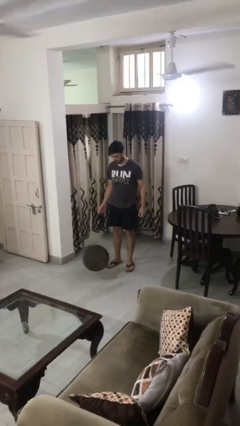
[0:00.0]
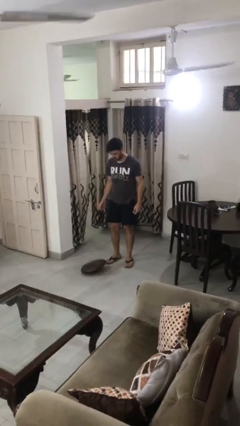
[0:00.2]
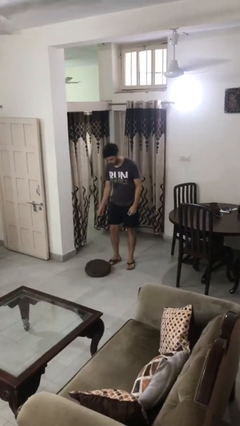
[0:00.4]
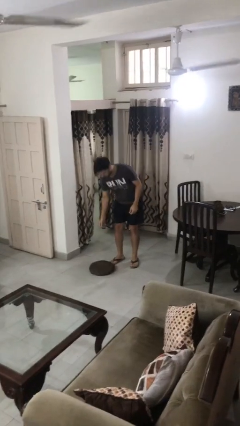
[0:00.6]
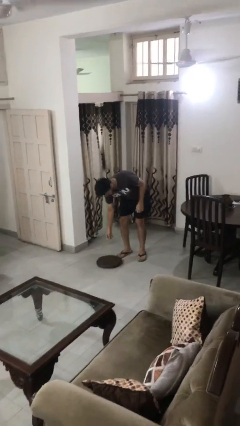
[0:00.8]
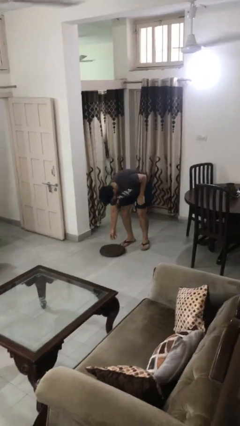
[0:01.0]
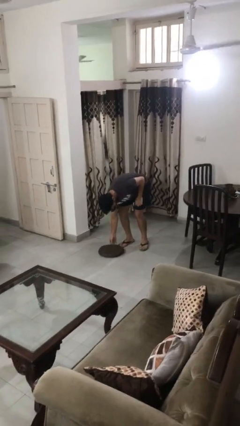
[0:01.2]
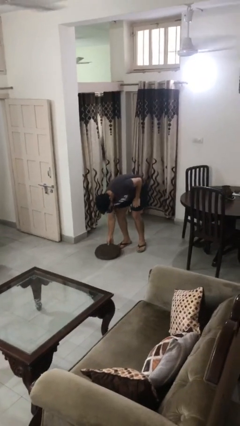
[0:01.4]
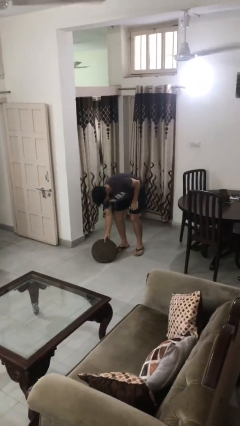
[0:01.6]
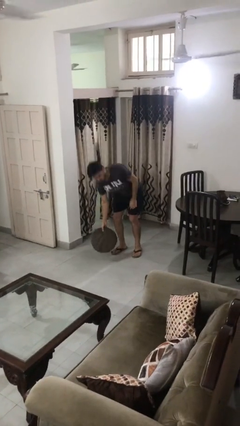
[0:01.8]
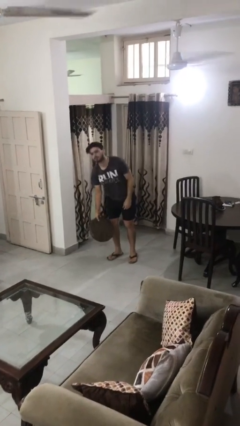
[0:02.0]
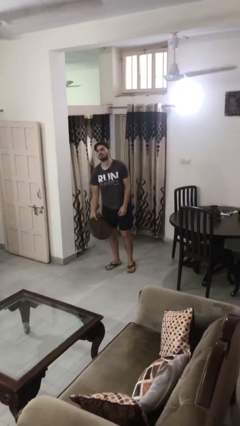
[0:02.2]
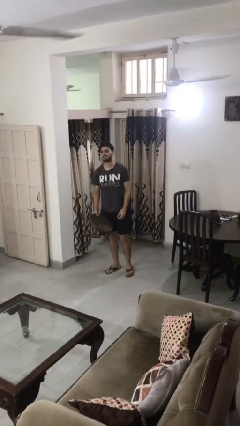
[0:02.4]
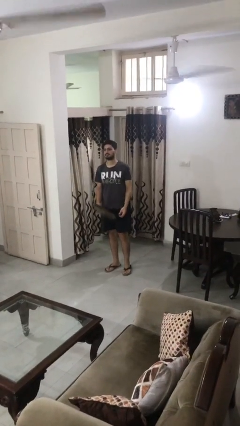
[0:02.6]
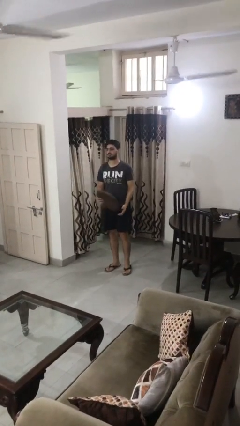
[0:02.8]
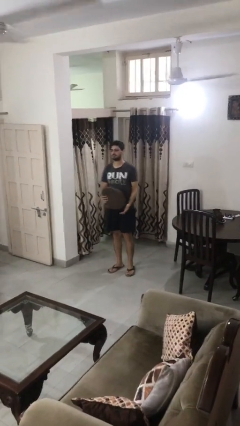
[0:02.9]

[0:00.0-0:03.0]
person picks up object from floor

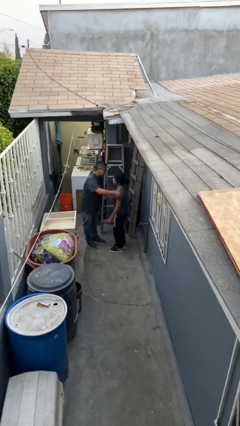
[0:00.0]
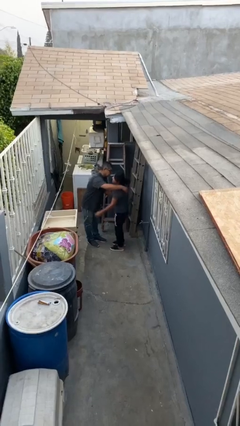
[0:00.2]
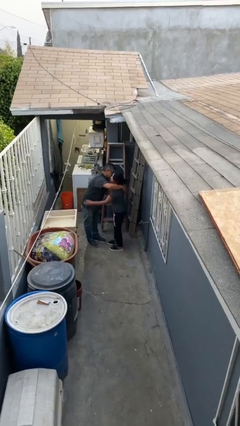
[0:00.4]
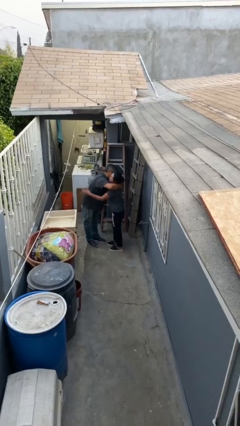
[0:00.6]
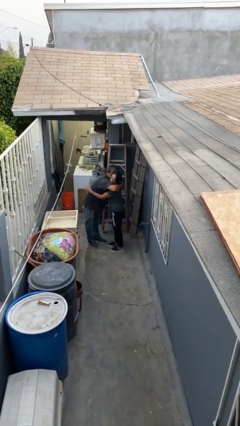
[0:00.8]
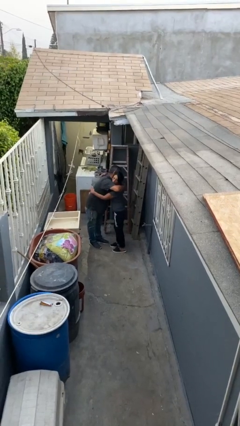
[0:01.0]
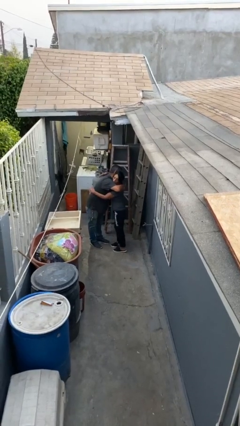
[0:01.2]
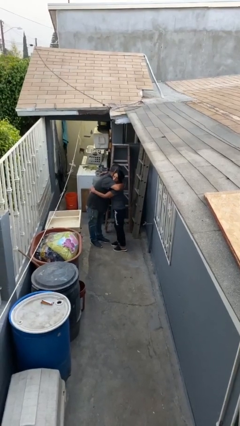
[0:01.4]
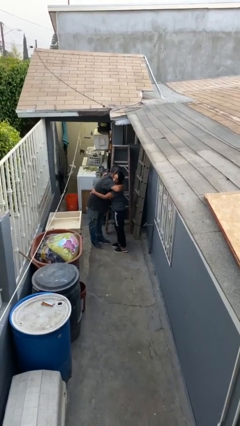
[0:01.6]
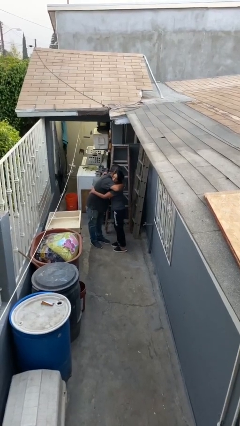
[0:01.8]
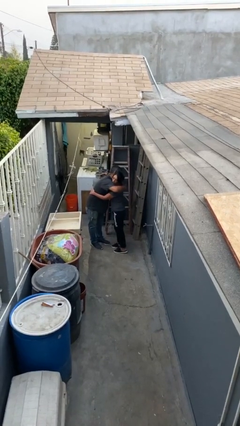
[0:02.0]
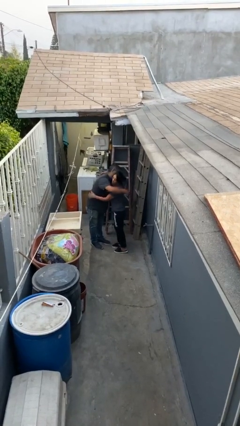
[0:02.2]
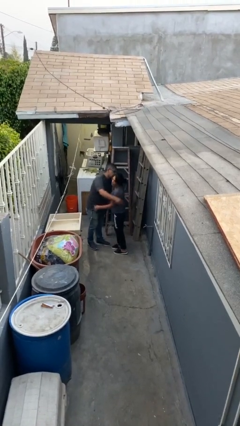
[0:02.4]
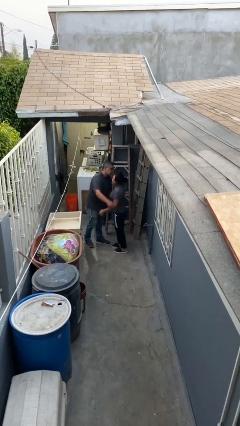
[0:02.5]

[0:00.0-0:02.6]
person embraces person

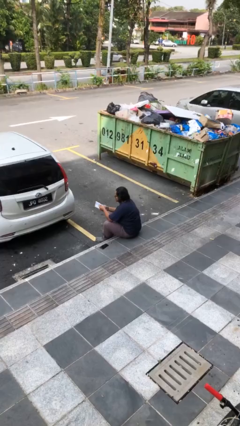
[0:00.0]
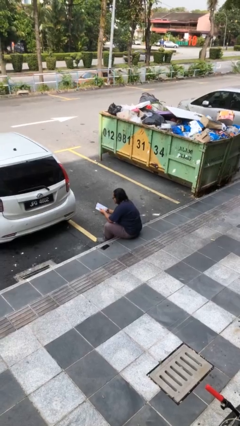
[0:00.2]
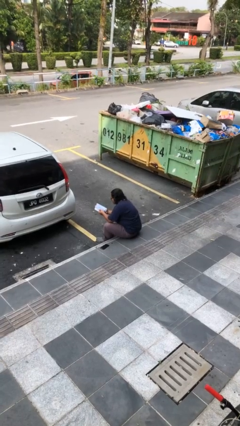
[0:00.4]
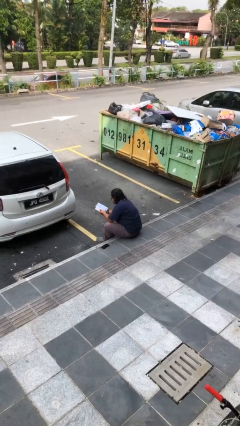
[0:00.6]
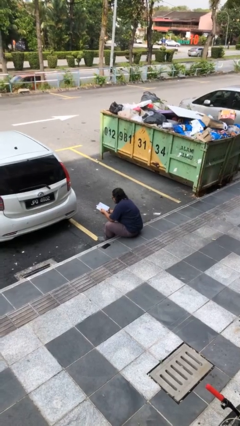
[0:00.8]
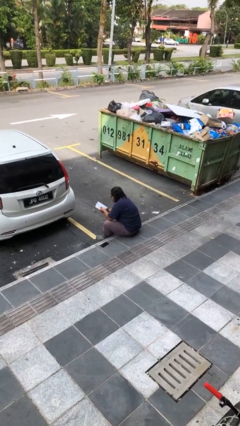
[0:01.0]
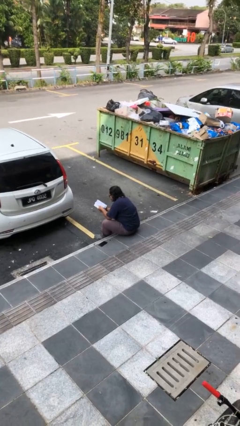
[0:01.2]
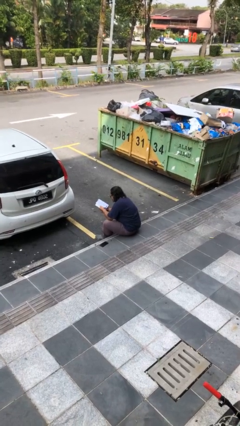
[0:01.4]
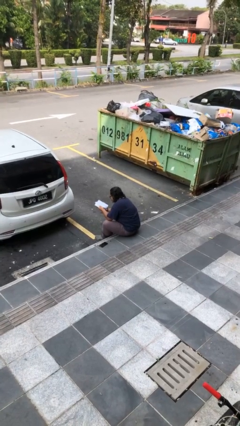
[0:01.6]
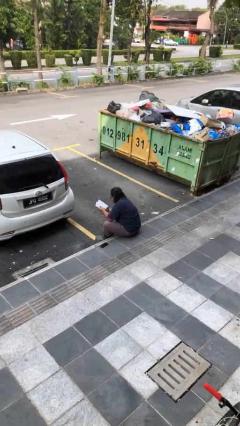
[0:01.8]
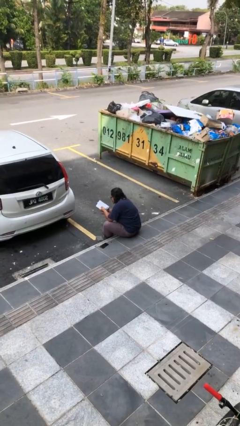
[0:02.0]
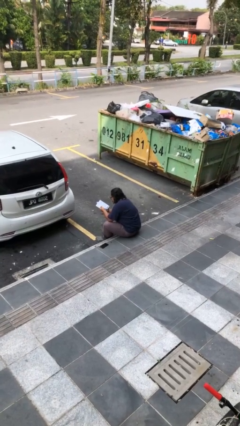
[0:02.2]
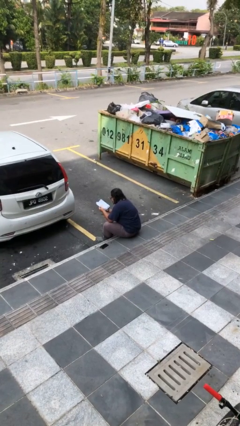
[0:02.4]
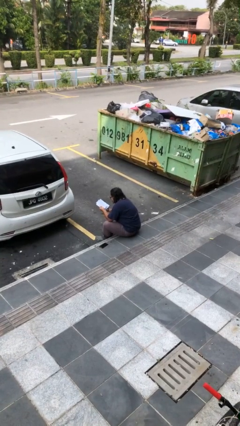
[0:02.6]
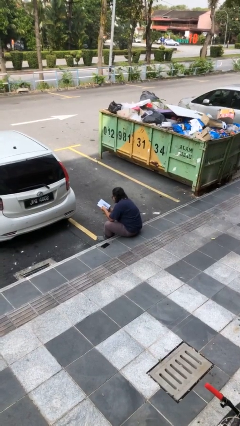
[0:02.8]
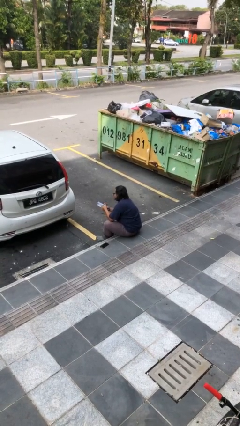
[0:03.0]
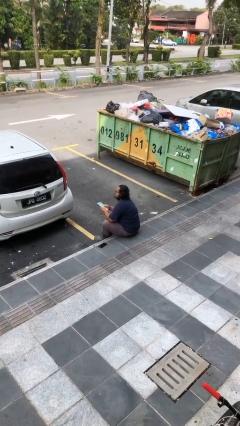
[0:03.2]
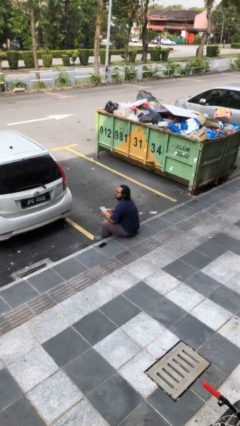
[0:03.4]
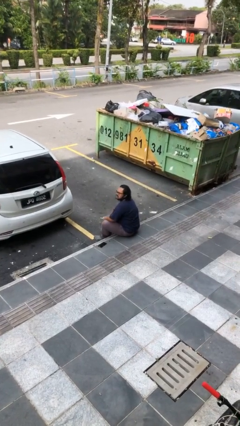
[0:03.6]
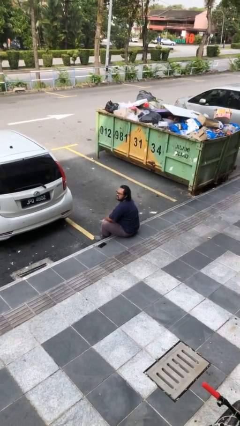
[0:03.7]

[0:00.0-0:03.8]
person reads document

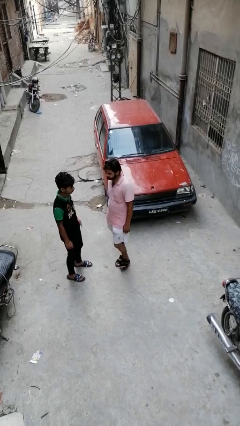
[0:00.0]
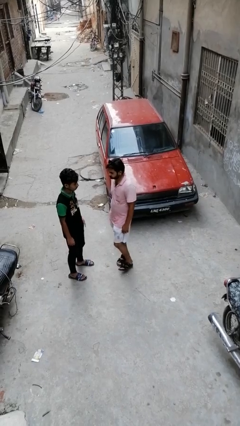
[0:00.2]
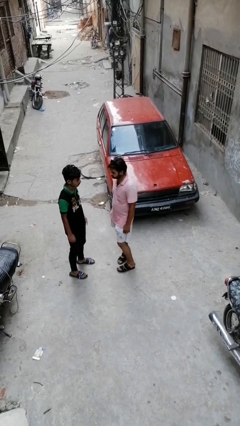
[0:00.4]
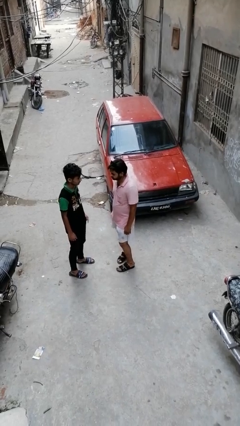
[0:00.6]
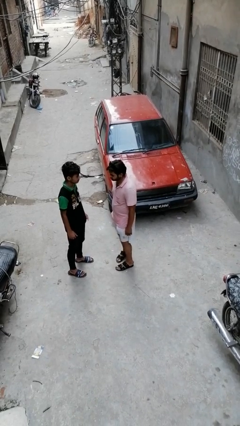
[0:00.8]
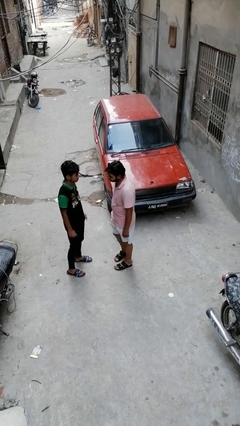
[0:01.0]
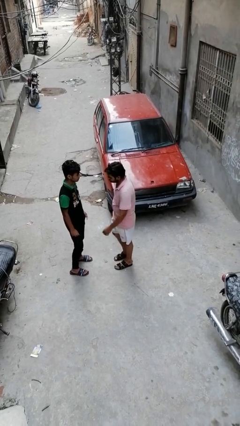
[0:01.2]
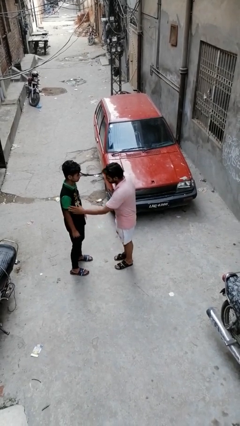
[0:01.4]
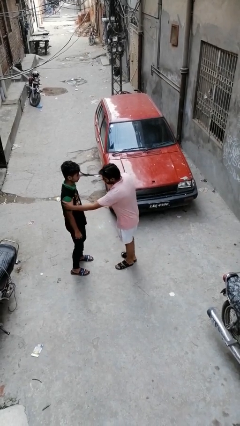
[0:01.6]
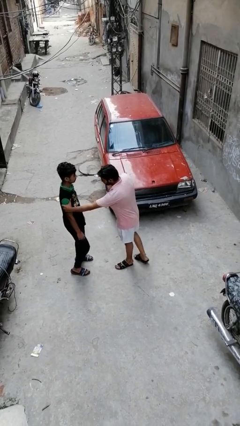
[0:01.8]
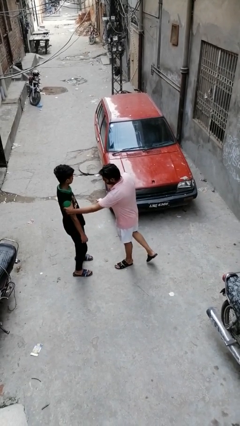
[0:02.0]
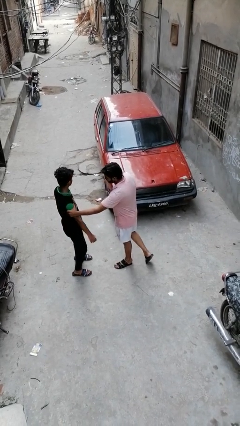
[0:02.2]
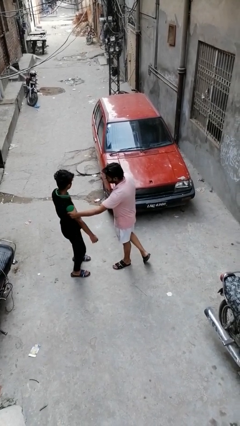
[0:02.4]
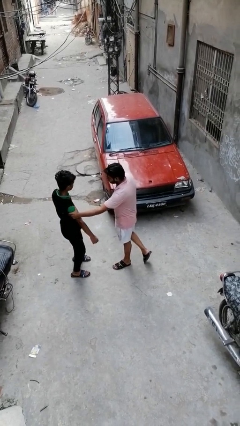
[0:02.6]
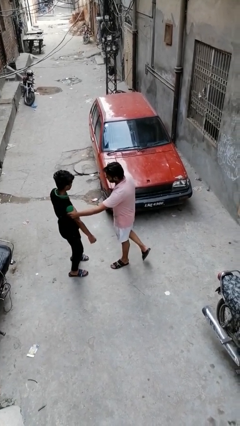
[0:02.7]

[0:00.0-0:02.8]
person grabs person by bicep

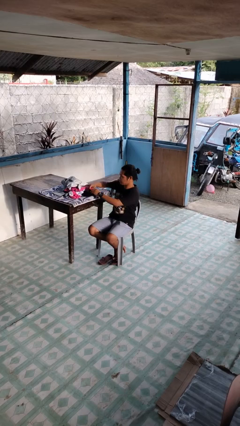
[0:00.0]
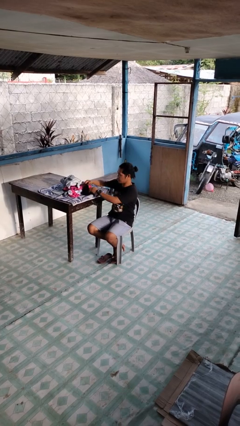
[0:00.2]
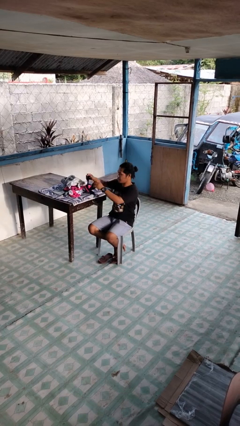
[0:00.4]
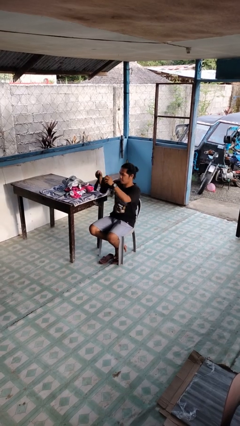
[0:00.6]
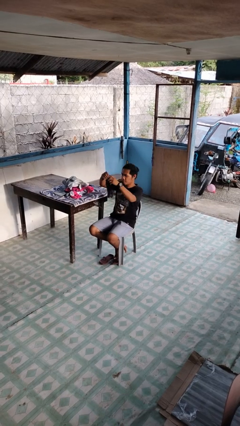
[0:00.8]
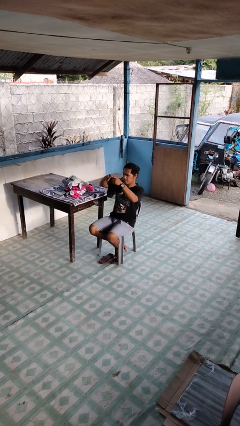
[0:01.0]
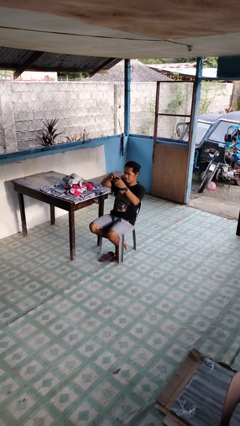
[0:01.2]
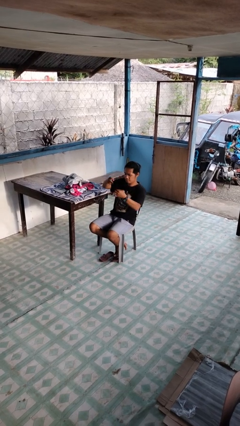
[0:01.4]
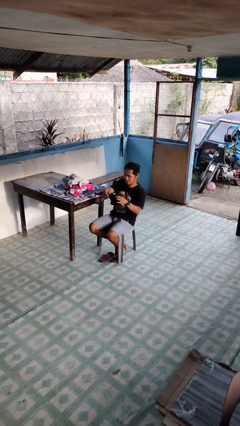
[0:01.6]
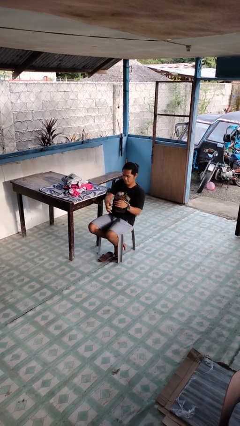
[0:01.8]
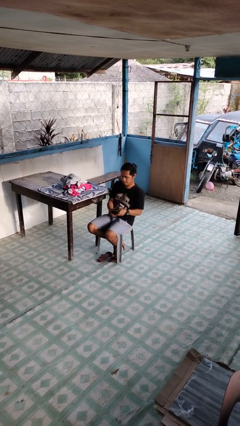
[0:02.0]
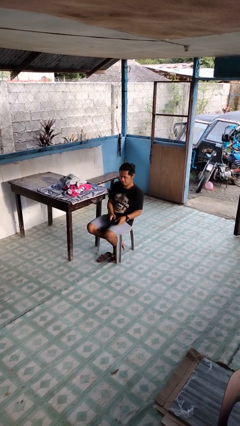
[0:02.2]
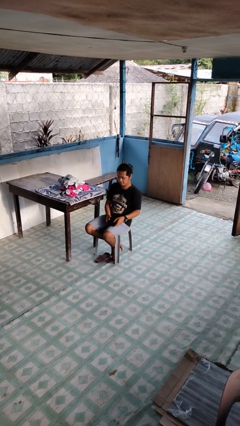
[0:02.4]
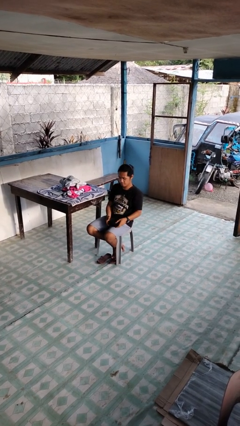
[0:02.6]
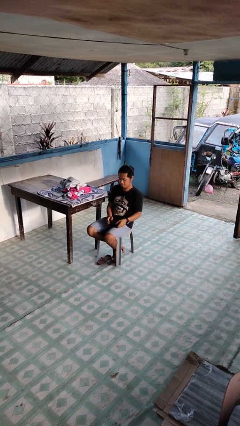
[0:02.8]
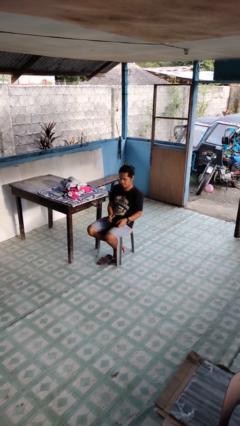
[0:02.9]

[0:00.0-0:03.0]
person folds socks

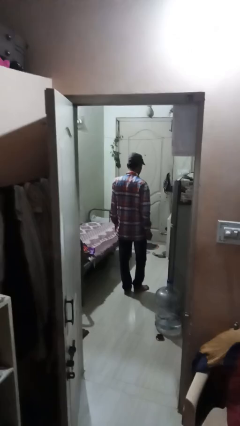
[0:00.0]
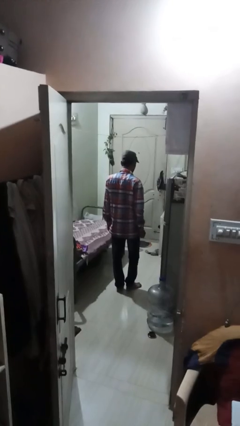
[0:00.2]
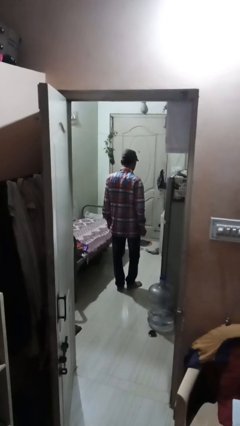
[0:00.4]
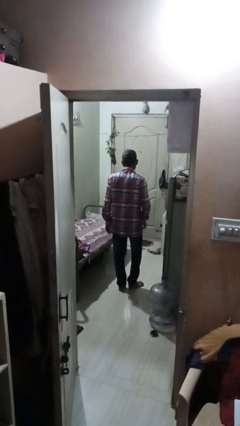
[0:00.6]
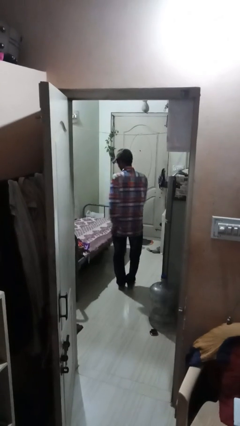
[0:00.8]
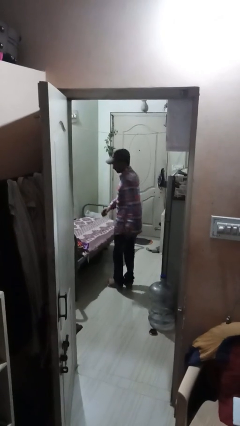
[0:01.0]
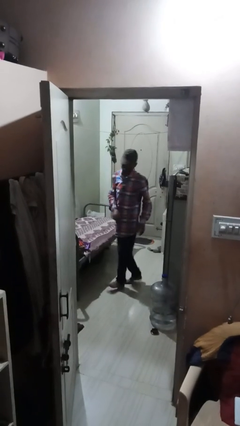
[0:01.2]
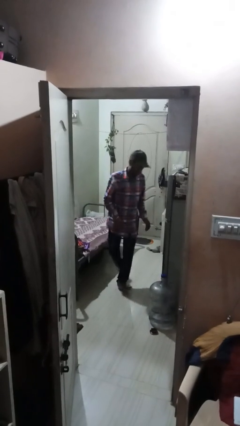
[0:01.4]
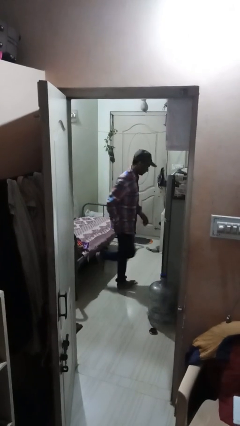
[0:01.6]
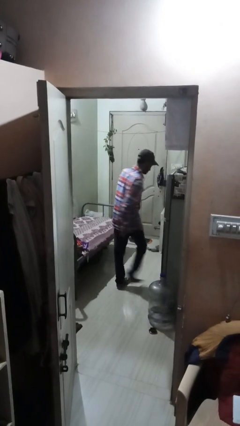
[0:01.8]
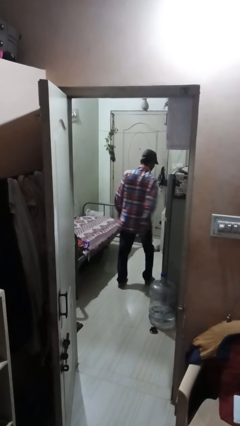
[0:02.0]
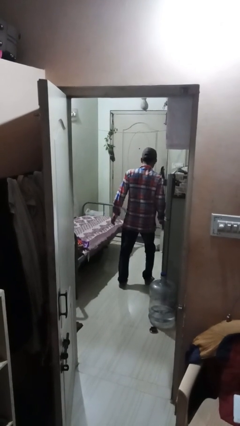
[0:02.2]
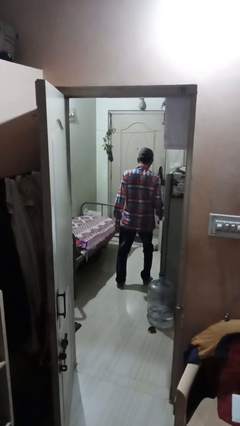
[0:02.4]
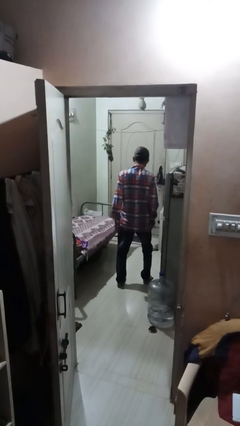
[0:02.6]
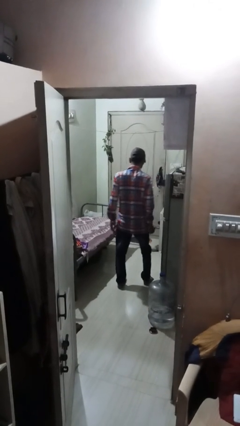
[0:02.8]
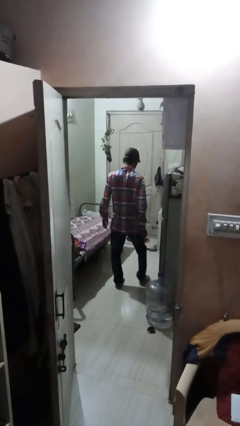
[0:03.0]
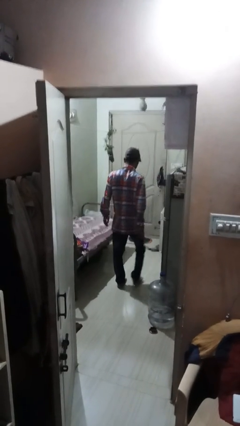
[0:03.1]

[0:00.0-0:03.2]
person twirls
